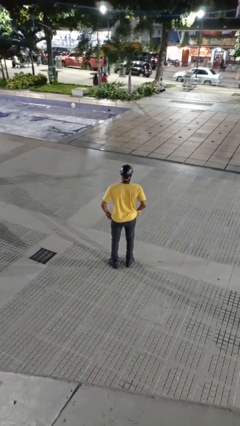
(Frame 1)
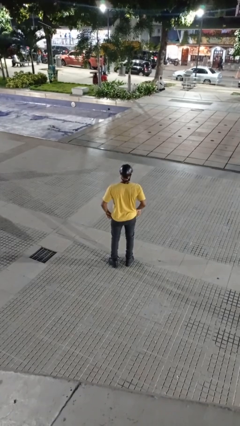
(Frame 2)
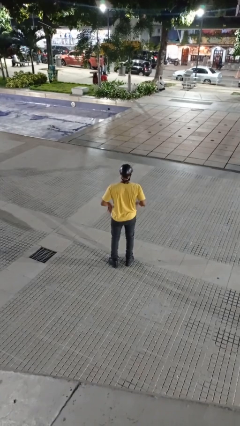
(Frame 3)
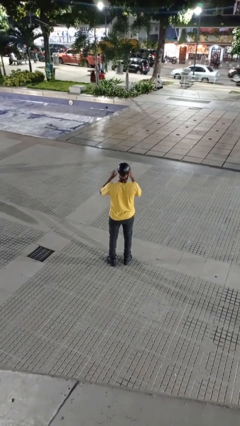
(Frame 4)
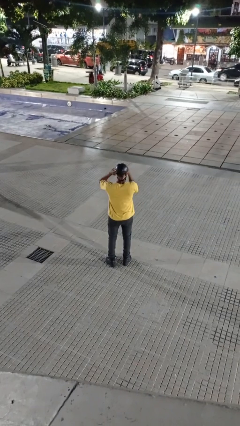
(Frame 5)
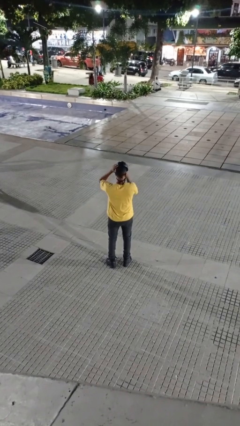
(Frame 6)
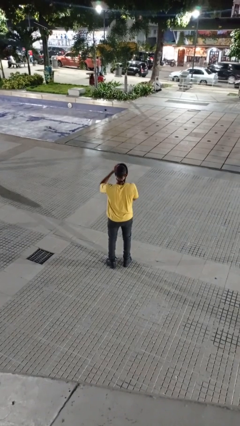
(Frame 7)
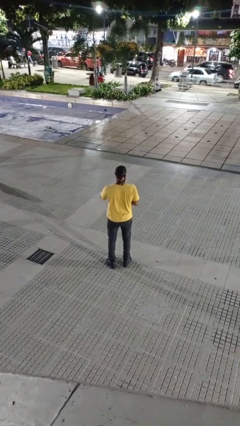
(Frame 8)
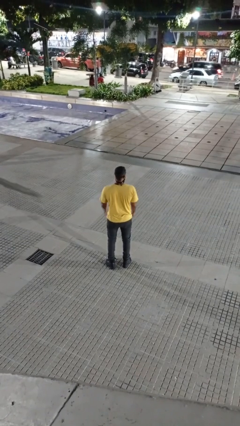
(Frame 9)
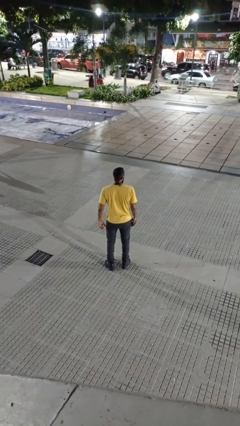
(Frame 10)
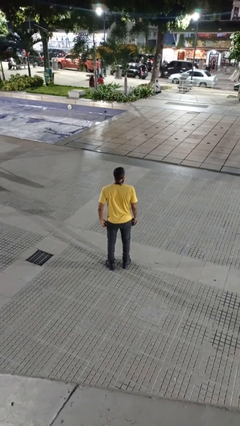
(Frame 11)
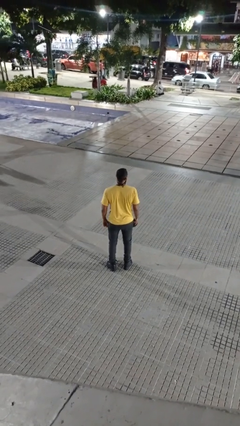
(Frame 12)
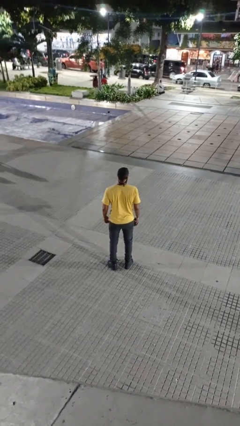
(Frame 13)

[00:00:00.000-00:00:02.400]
person takes off hat

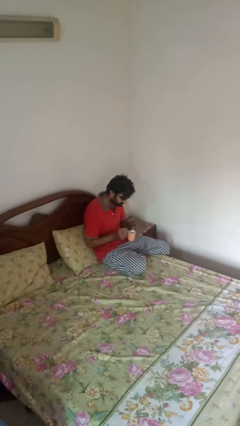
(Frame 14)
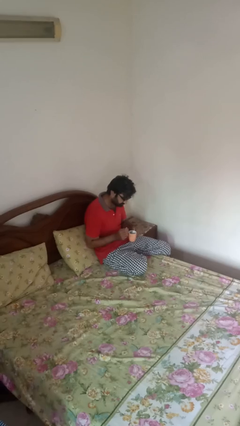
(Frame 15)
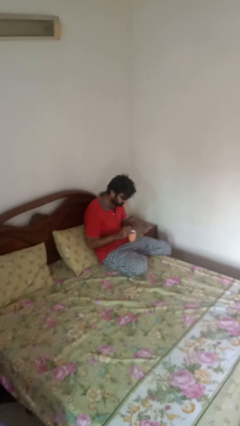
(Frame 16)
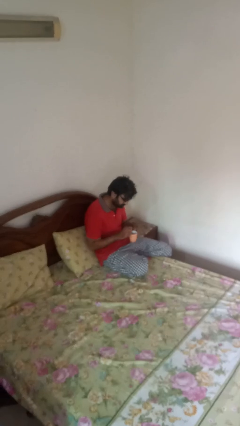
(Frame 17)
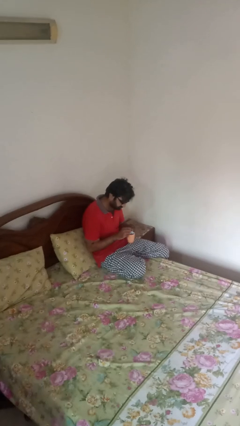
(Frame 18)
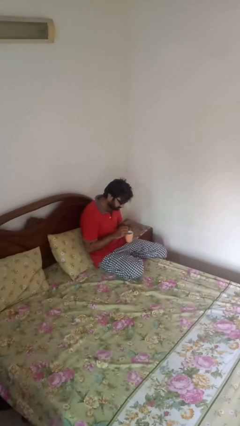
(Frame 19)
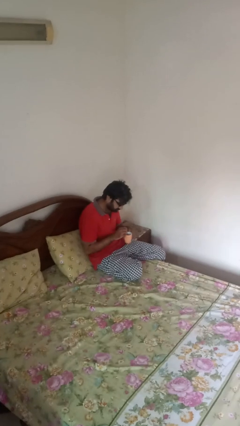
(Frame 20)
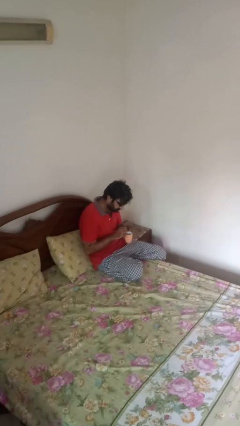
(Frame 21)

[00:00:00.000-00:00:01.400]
person stirs mug

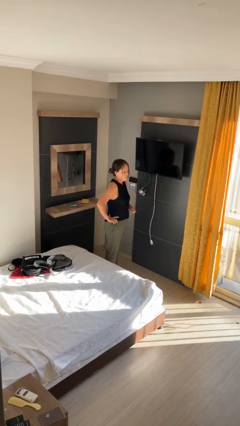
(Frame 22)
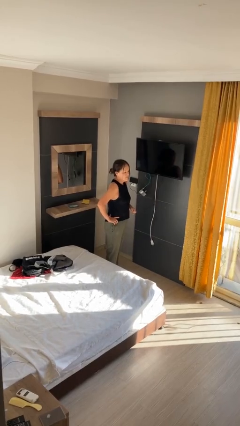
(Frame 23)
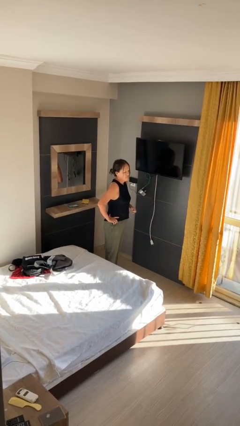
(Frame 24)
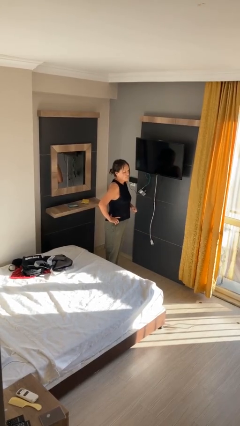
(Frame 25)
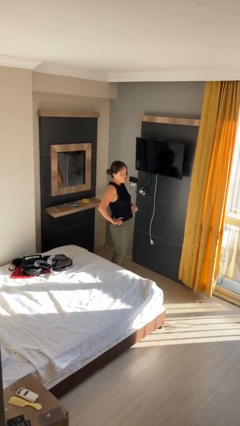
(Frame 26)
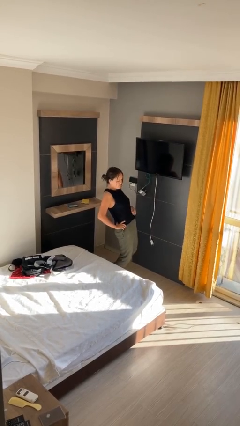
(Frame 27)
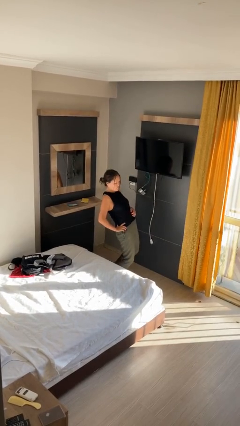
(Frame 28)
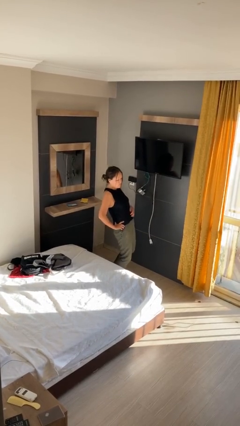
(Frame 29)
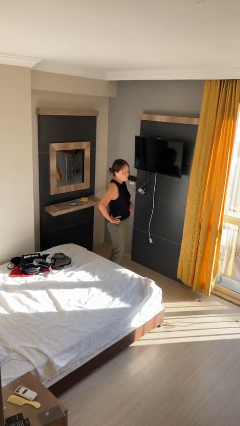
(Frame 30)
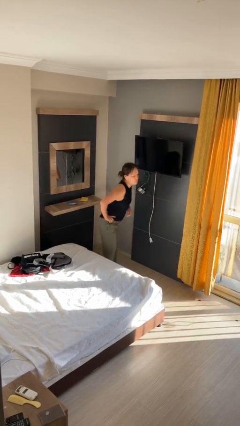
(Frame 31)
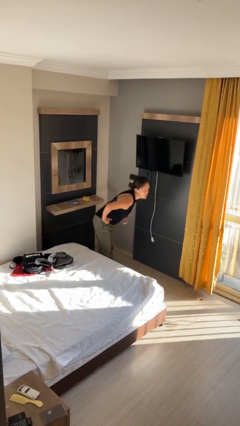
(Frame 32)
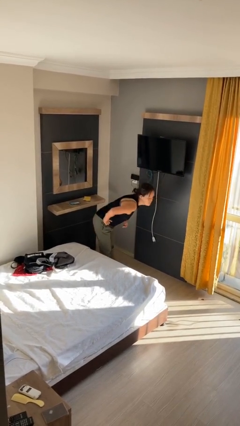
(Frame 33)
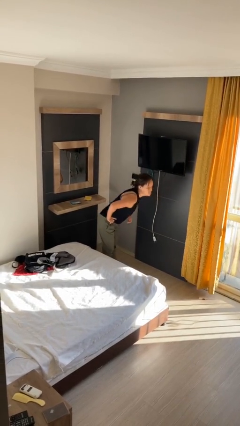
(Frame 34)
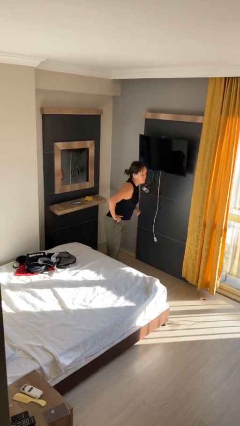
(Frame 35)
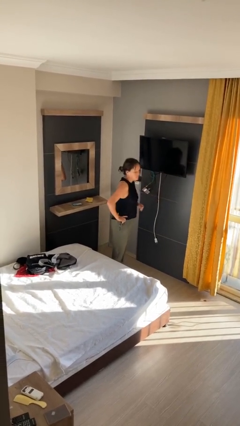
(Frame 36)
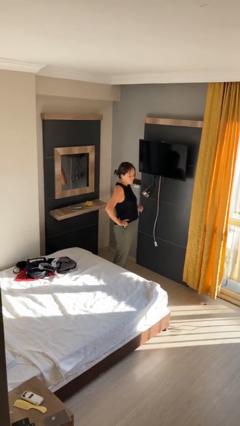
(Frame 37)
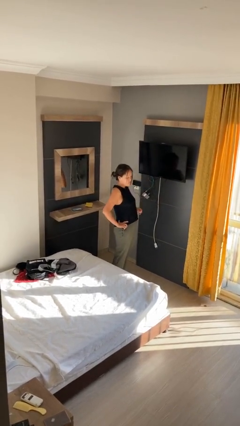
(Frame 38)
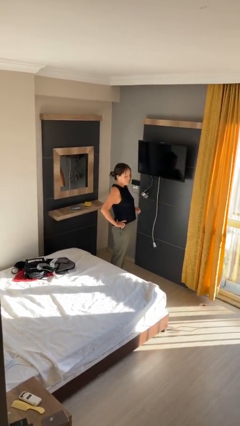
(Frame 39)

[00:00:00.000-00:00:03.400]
person wiggles hips

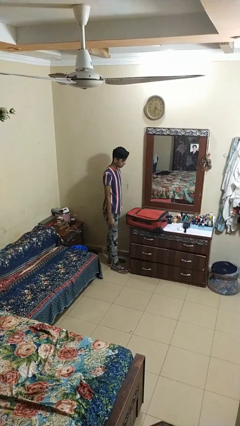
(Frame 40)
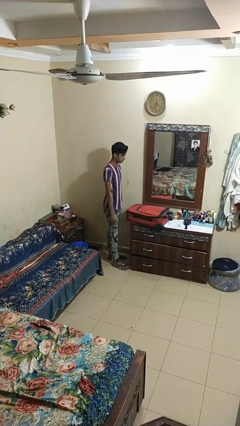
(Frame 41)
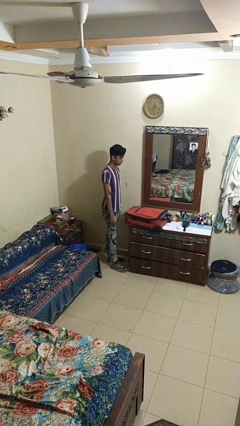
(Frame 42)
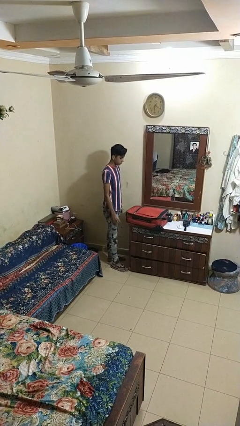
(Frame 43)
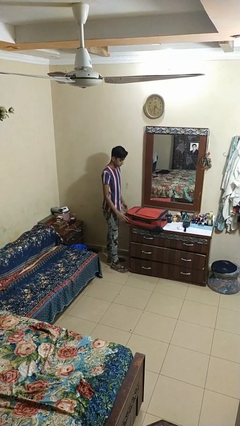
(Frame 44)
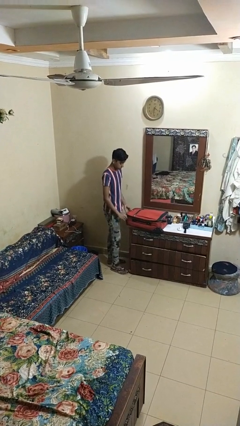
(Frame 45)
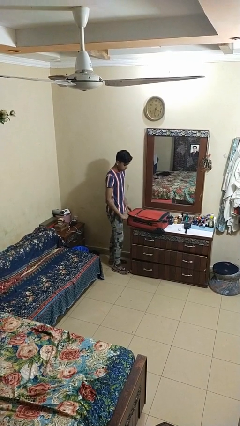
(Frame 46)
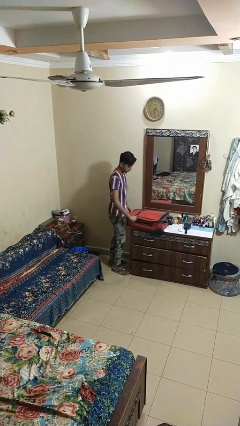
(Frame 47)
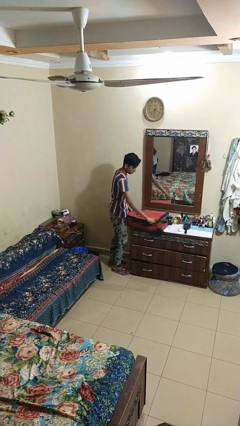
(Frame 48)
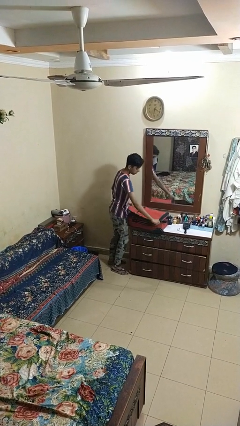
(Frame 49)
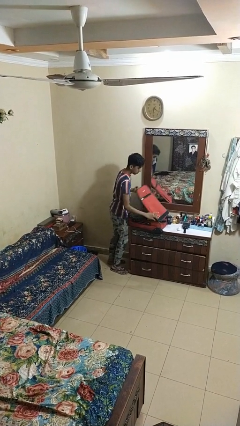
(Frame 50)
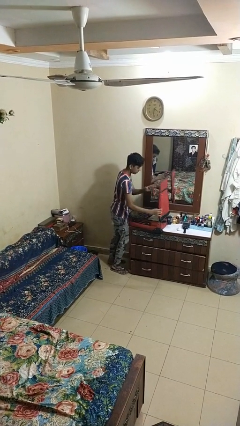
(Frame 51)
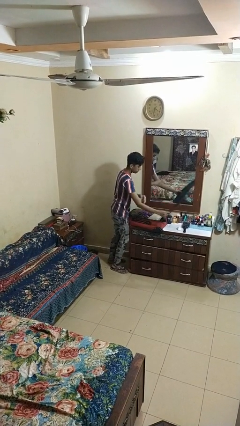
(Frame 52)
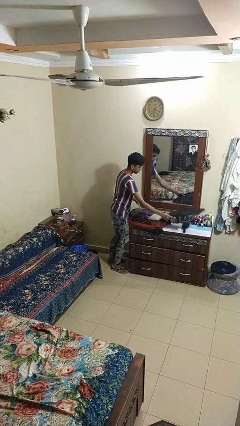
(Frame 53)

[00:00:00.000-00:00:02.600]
person opens suitcase

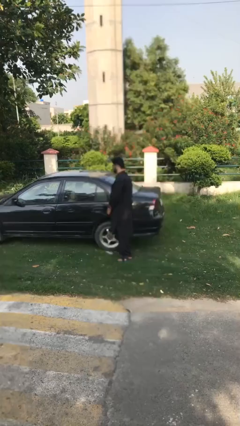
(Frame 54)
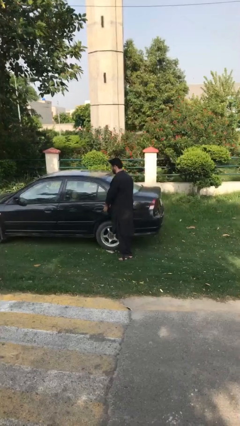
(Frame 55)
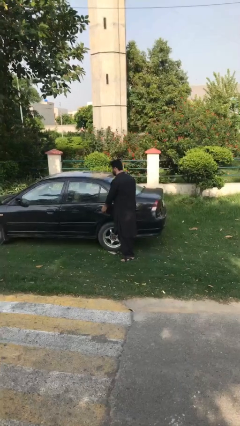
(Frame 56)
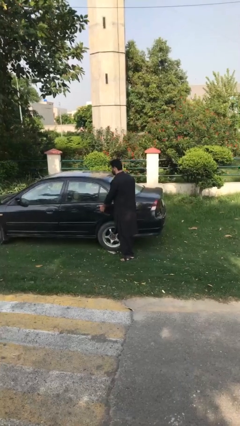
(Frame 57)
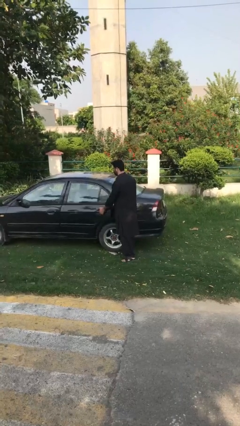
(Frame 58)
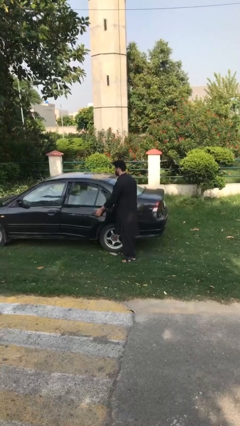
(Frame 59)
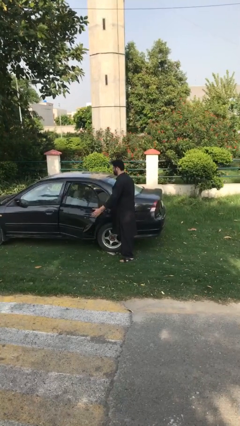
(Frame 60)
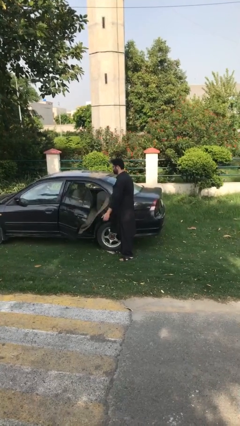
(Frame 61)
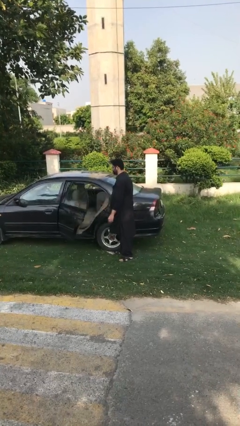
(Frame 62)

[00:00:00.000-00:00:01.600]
person opens car door

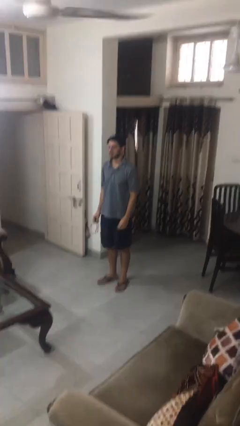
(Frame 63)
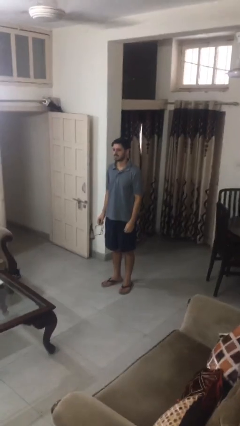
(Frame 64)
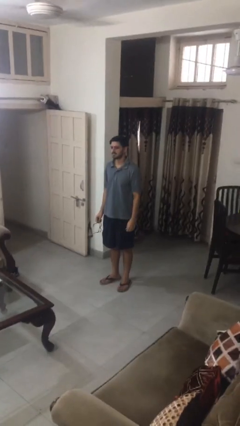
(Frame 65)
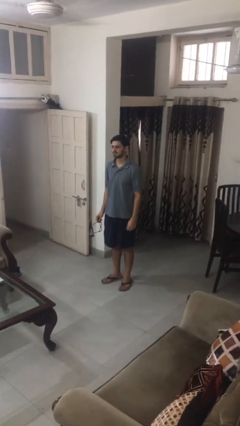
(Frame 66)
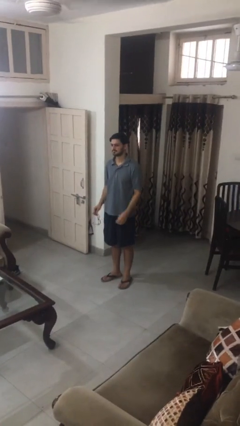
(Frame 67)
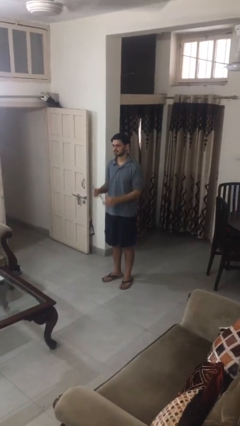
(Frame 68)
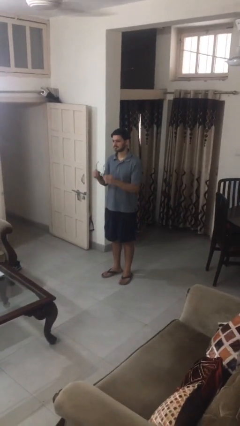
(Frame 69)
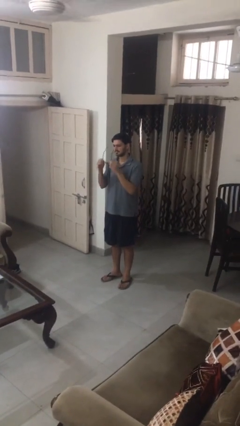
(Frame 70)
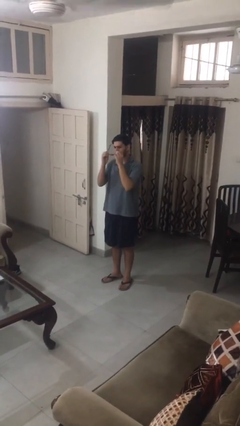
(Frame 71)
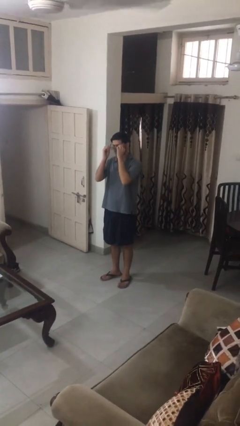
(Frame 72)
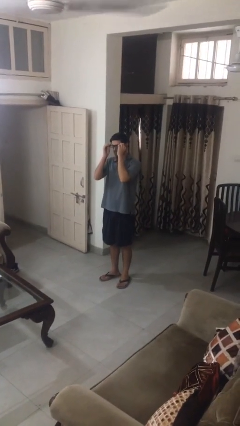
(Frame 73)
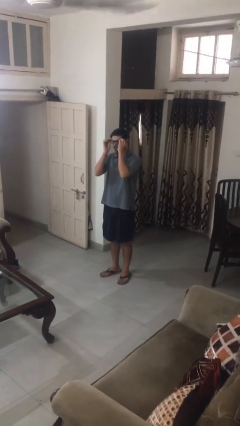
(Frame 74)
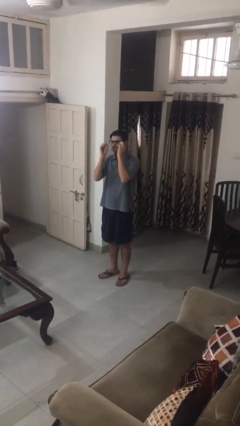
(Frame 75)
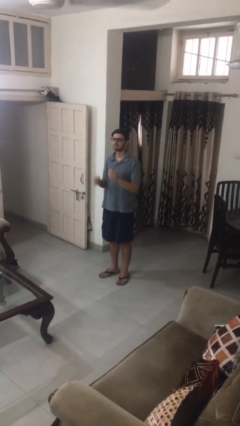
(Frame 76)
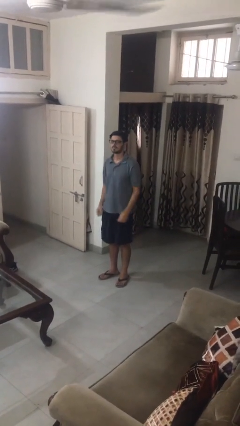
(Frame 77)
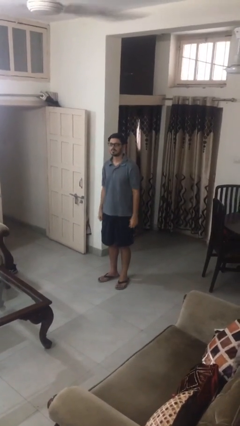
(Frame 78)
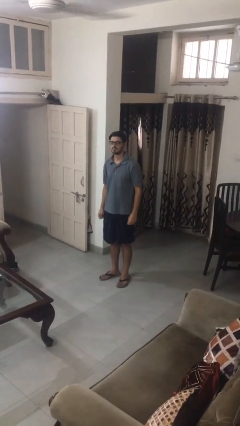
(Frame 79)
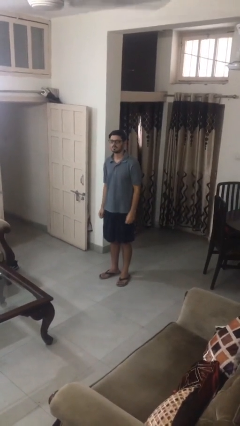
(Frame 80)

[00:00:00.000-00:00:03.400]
person puts on glasses

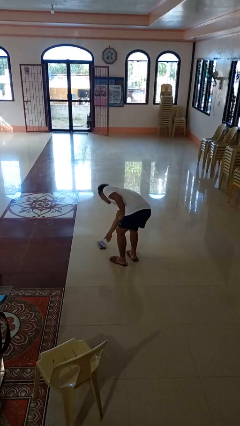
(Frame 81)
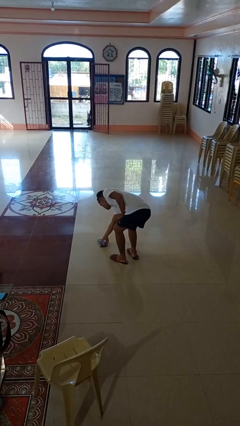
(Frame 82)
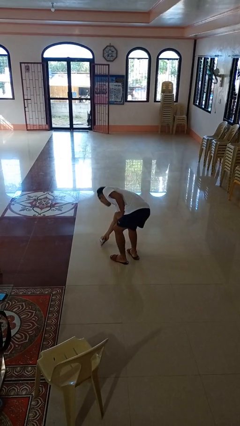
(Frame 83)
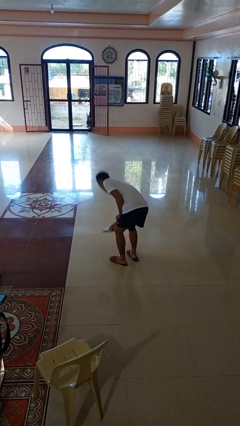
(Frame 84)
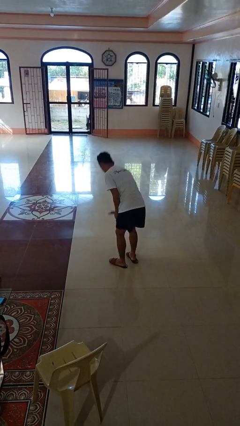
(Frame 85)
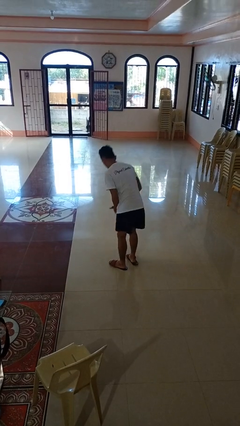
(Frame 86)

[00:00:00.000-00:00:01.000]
person picks up object from floor

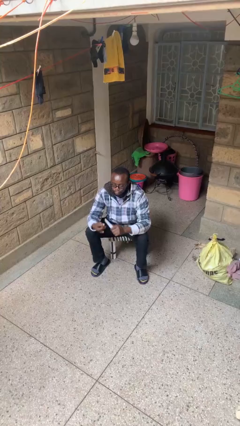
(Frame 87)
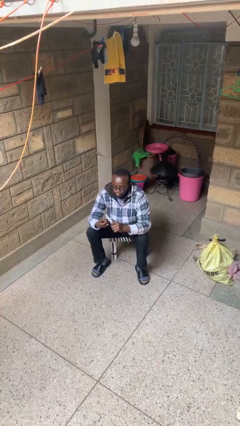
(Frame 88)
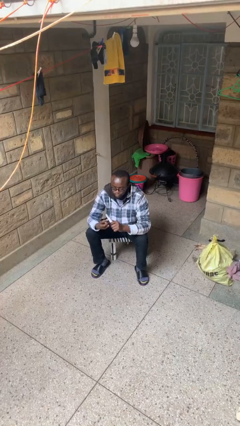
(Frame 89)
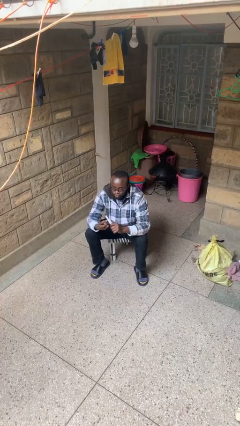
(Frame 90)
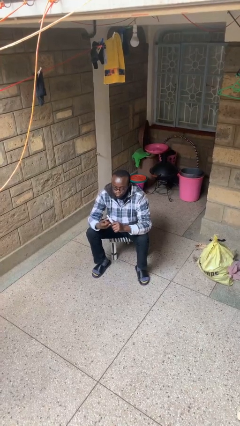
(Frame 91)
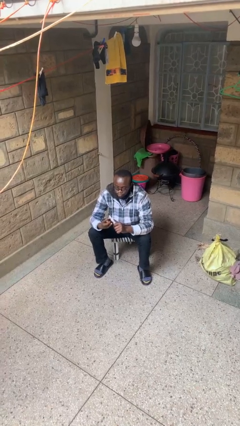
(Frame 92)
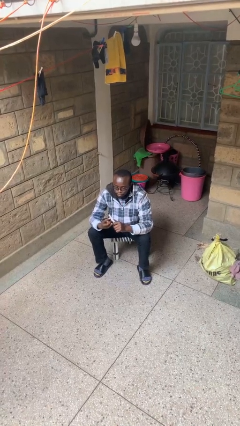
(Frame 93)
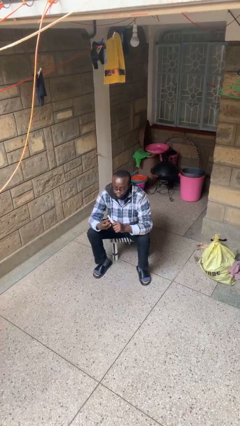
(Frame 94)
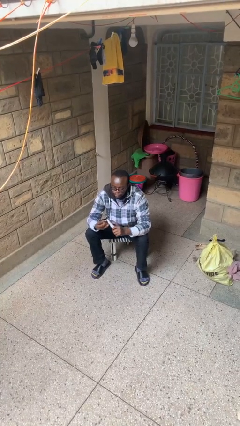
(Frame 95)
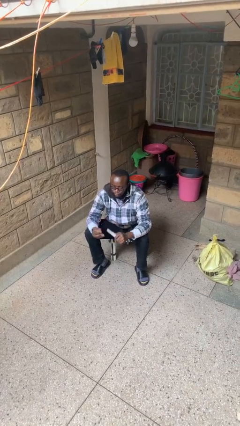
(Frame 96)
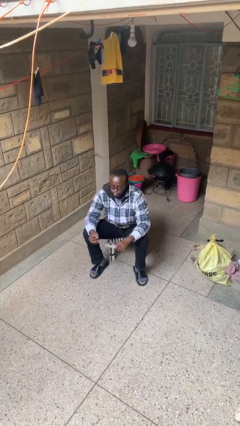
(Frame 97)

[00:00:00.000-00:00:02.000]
person files fingernails
